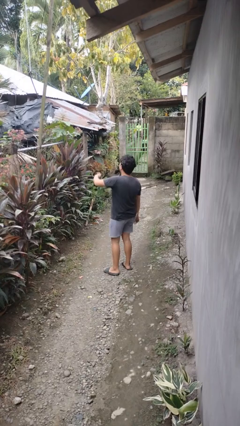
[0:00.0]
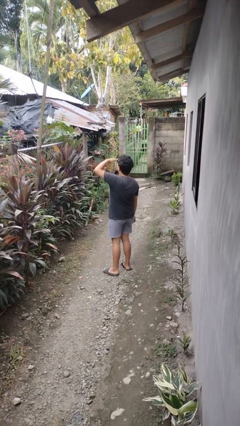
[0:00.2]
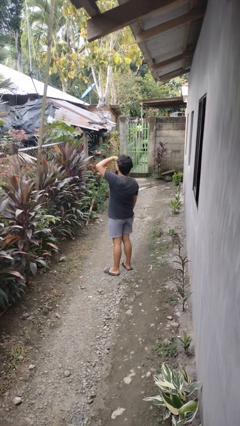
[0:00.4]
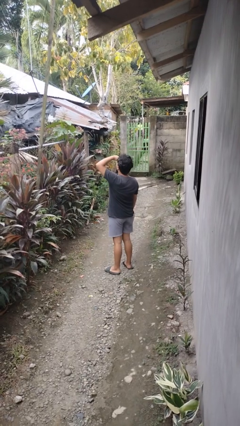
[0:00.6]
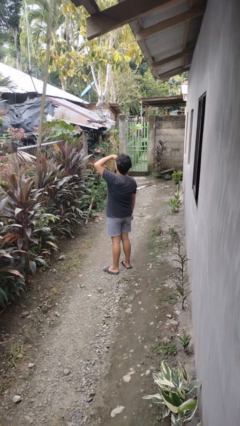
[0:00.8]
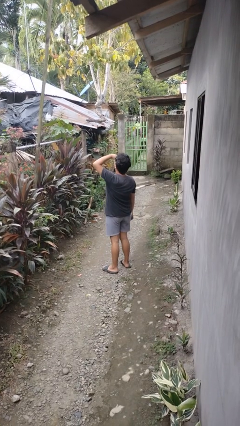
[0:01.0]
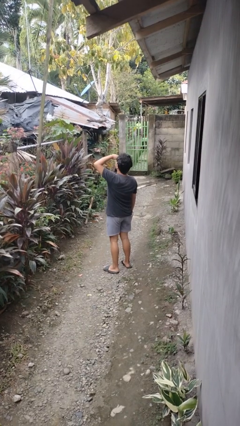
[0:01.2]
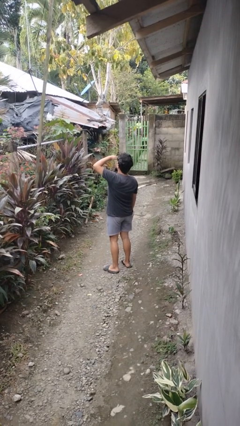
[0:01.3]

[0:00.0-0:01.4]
person shades eyes

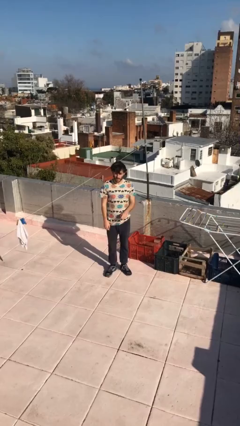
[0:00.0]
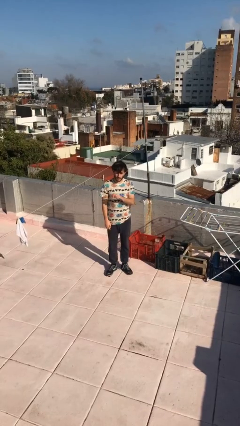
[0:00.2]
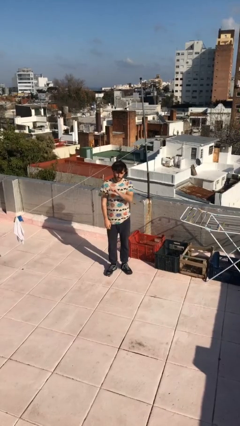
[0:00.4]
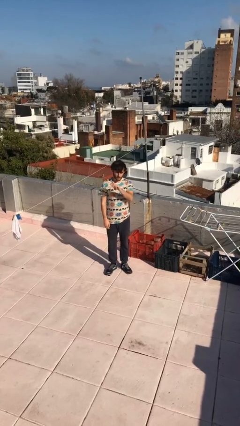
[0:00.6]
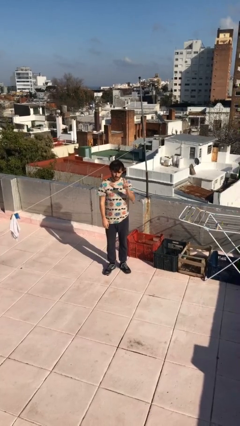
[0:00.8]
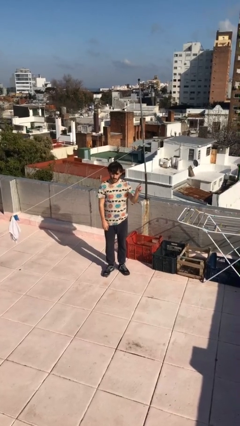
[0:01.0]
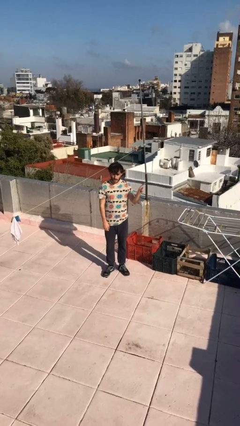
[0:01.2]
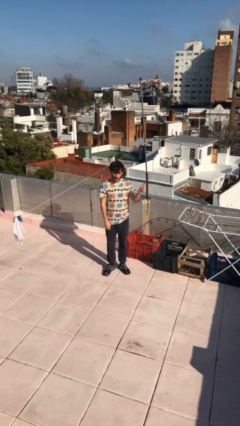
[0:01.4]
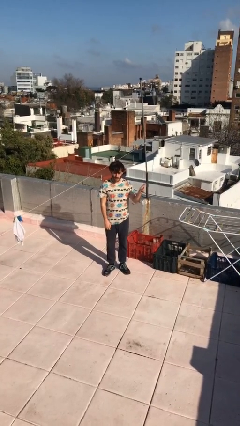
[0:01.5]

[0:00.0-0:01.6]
person gestures swipe left

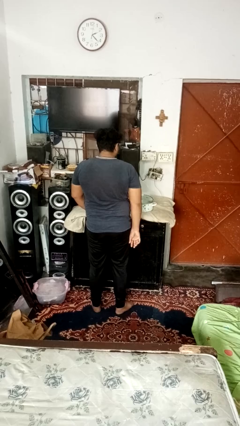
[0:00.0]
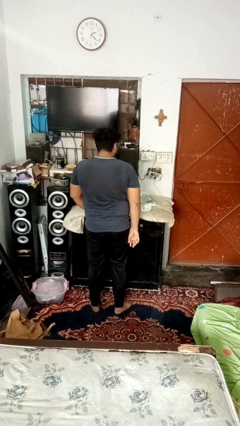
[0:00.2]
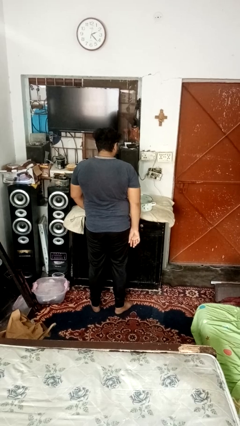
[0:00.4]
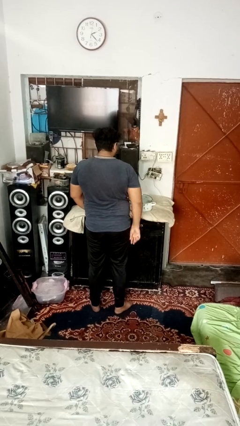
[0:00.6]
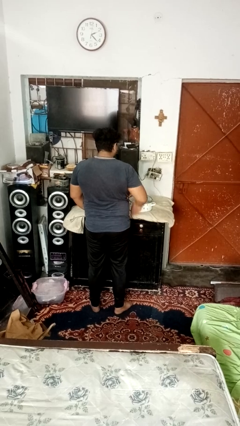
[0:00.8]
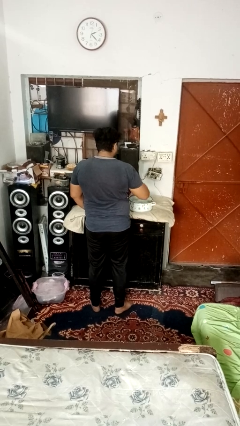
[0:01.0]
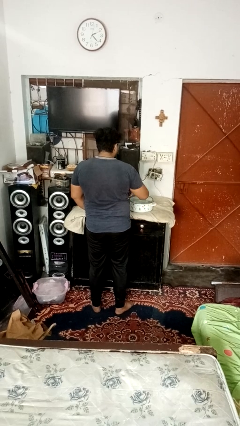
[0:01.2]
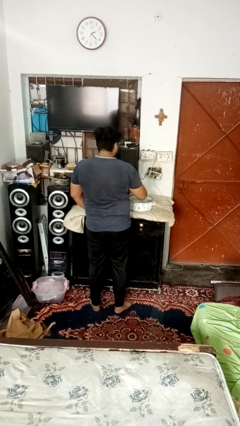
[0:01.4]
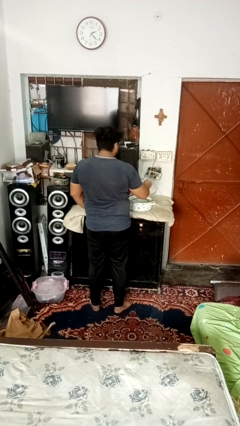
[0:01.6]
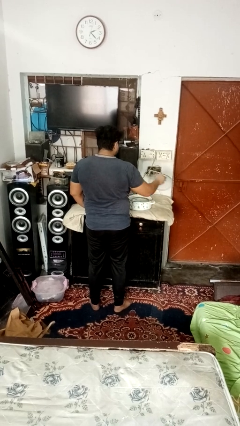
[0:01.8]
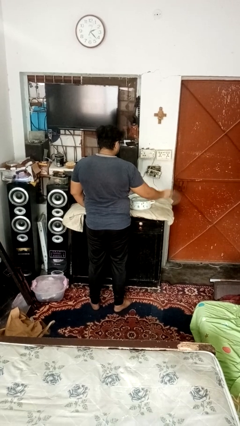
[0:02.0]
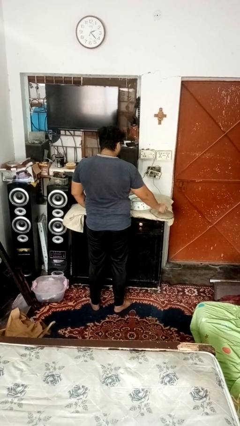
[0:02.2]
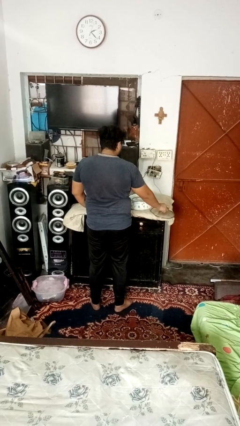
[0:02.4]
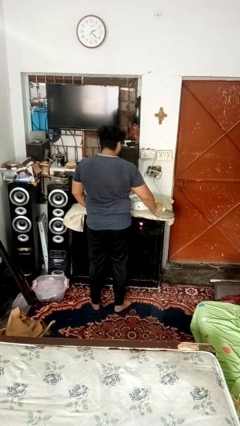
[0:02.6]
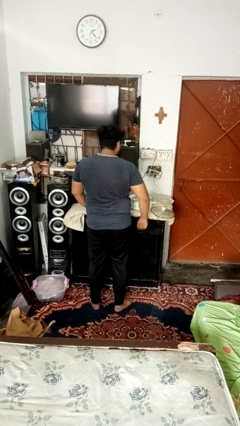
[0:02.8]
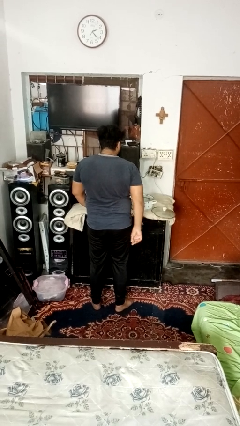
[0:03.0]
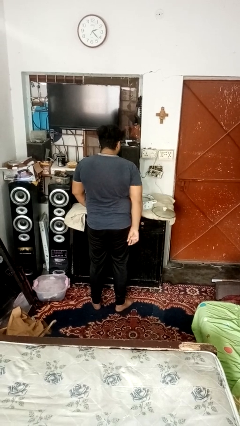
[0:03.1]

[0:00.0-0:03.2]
person opens jar

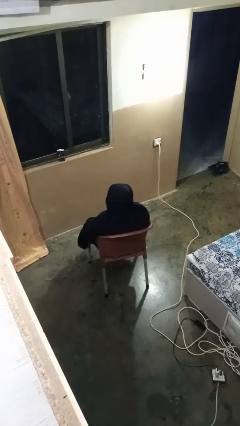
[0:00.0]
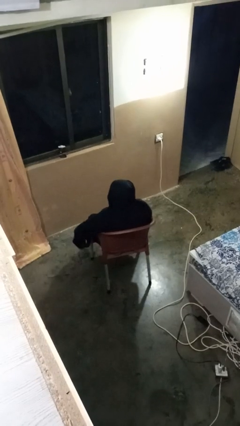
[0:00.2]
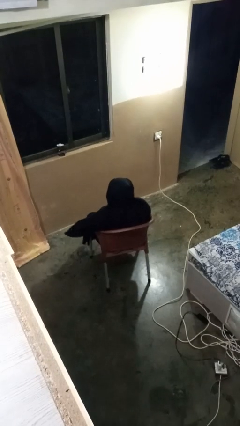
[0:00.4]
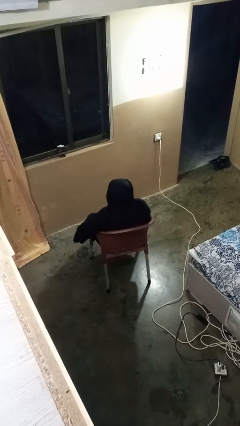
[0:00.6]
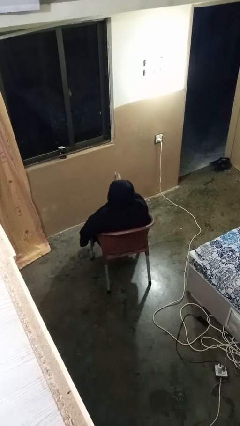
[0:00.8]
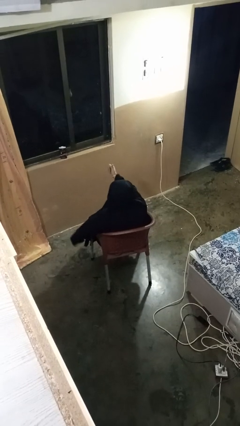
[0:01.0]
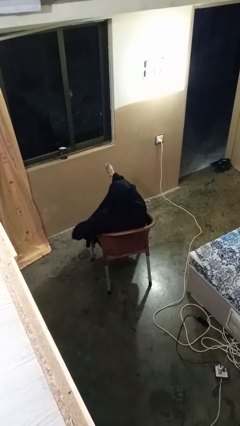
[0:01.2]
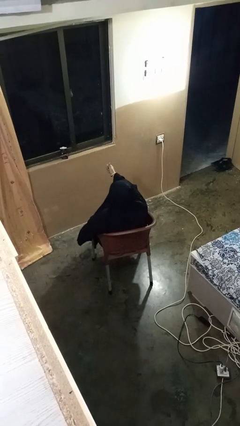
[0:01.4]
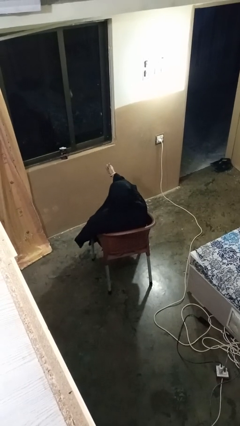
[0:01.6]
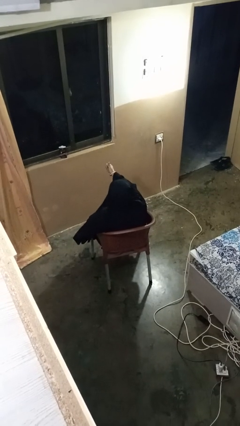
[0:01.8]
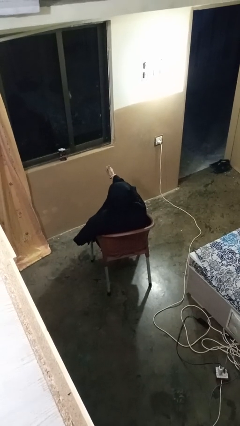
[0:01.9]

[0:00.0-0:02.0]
person gestures thumbs up

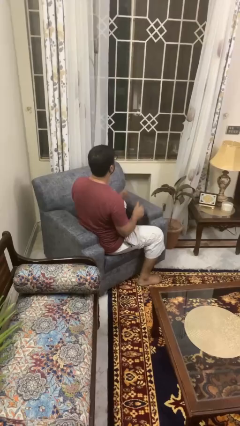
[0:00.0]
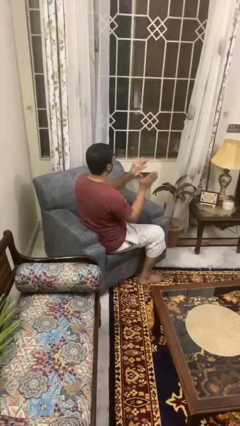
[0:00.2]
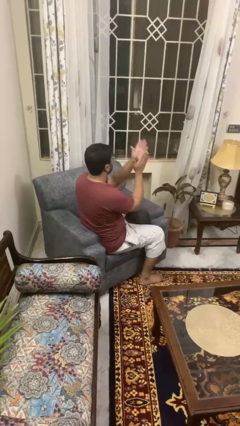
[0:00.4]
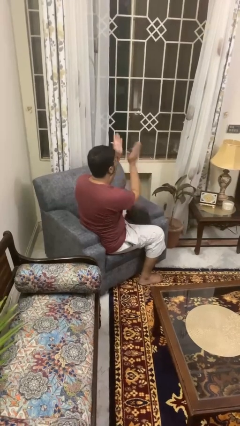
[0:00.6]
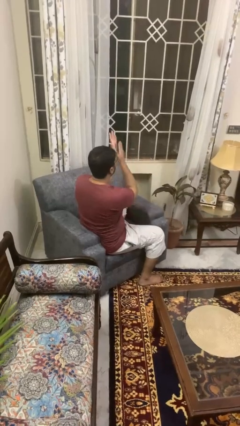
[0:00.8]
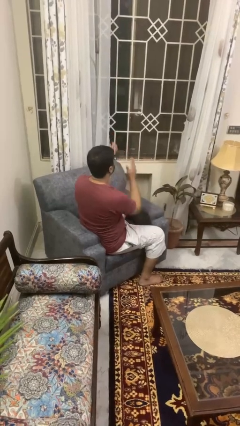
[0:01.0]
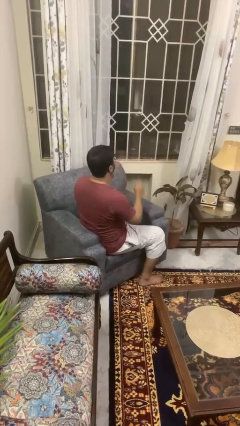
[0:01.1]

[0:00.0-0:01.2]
person swats bug

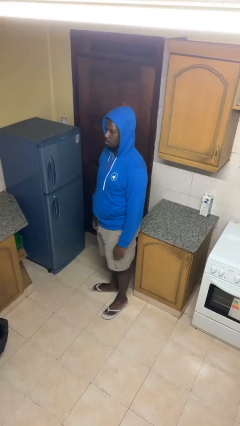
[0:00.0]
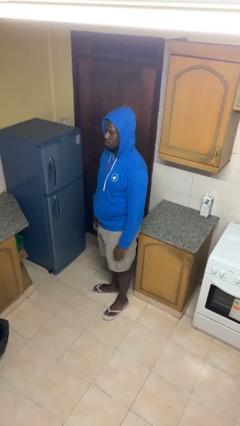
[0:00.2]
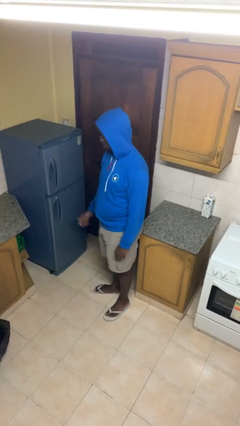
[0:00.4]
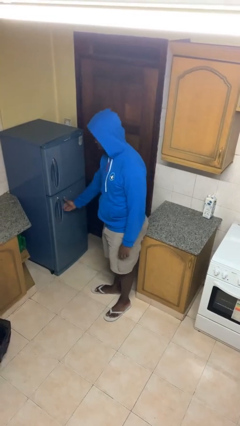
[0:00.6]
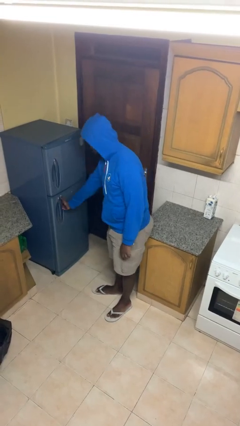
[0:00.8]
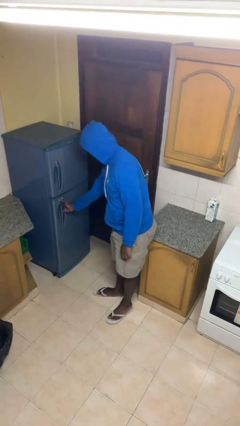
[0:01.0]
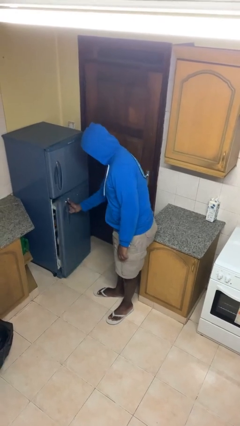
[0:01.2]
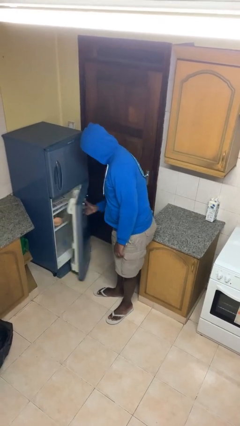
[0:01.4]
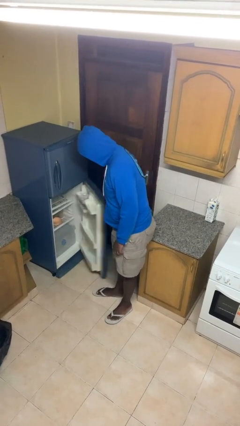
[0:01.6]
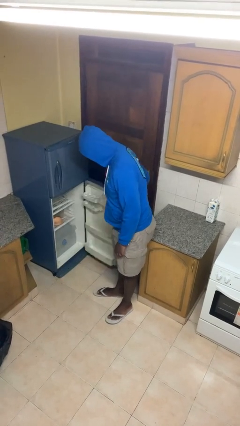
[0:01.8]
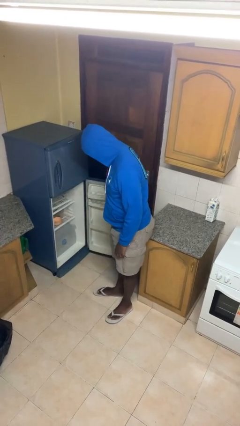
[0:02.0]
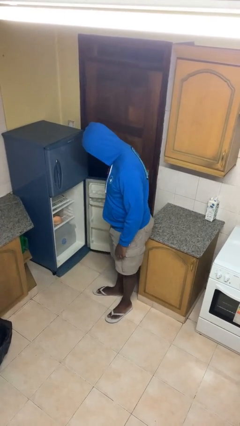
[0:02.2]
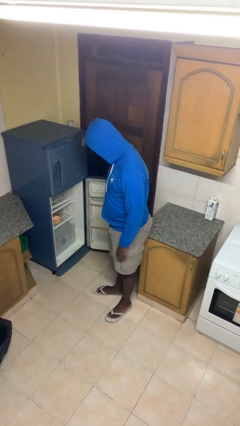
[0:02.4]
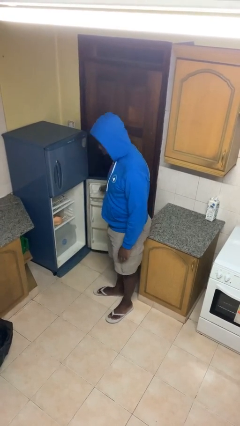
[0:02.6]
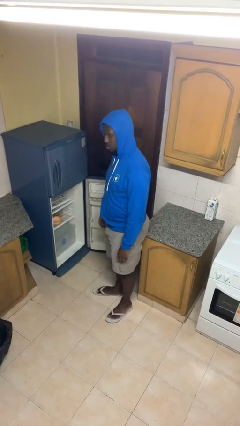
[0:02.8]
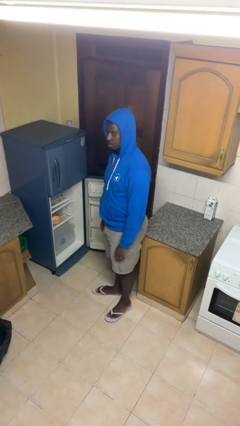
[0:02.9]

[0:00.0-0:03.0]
person opens refrigerator

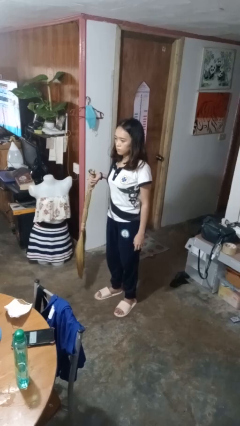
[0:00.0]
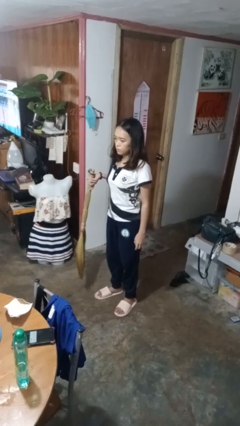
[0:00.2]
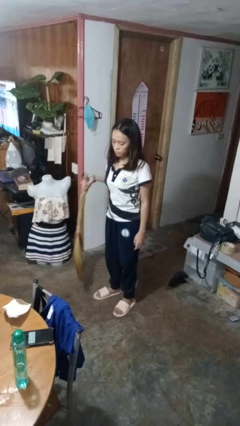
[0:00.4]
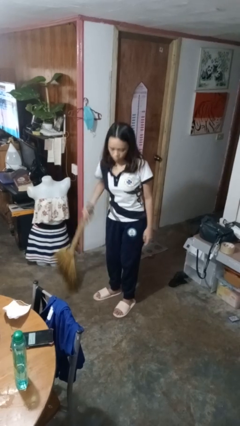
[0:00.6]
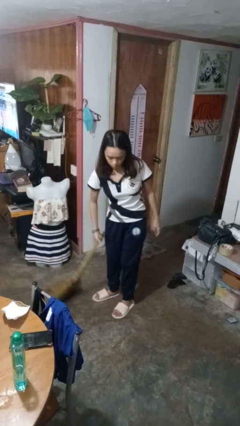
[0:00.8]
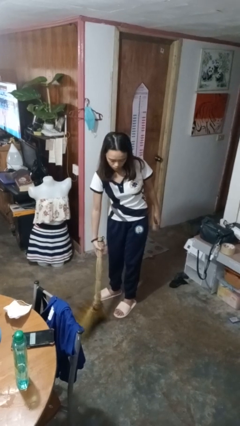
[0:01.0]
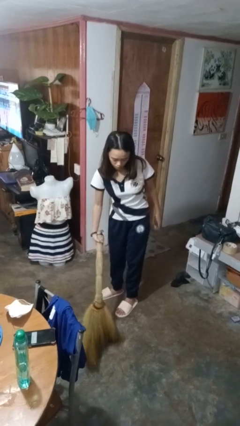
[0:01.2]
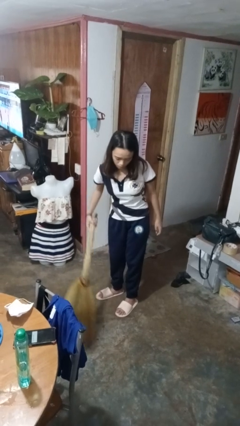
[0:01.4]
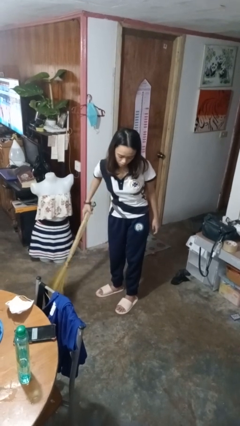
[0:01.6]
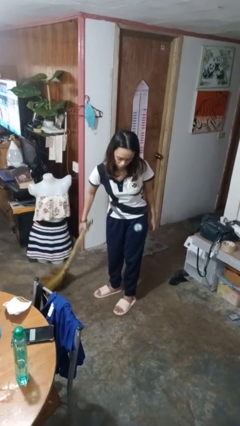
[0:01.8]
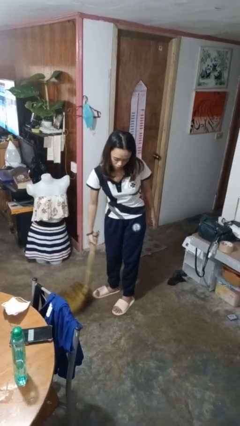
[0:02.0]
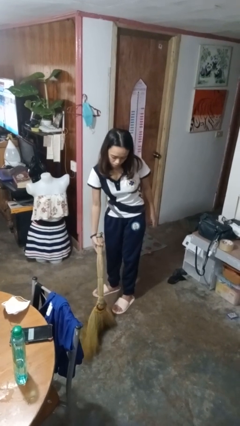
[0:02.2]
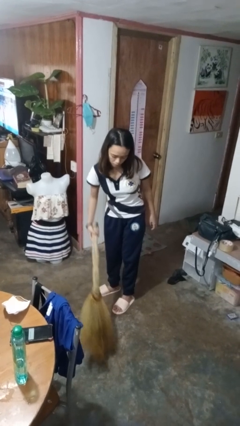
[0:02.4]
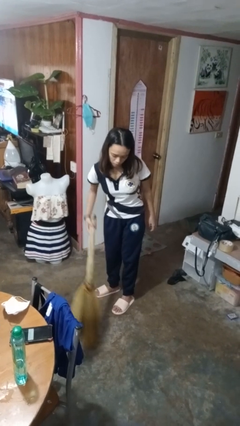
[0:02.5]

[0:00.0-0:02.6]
person sweeps floor

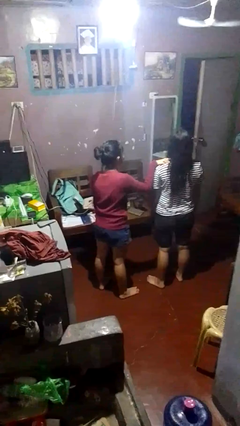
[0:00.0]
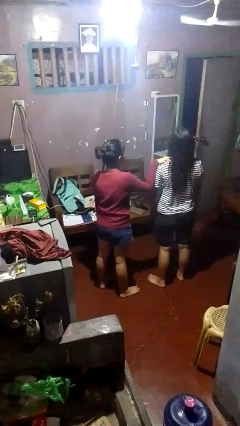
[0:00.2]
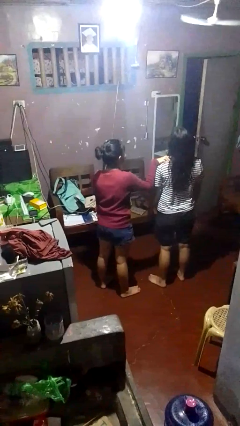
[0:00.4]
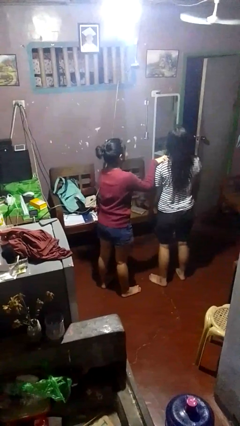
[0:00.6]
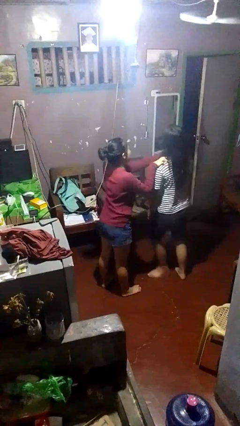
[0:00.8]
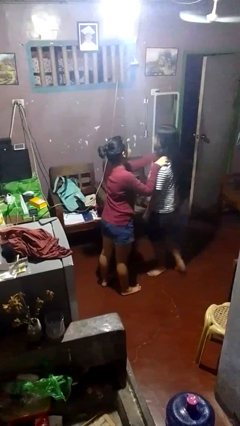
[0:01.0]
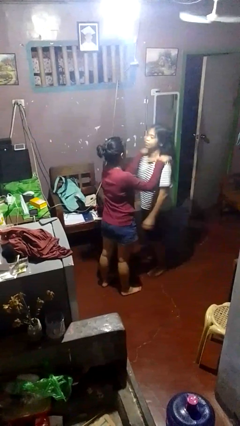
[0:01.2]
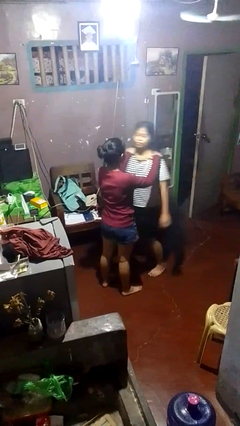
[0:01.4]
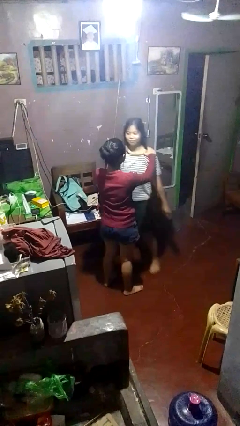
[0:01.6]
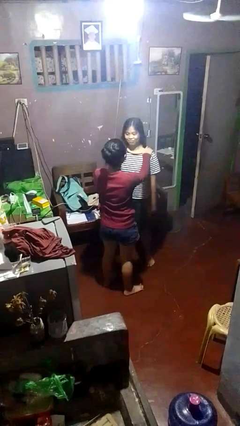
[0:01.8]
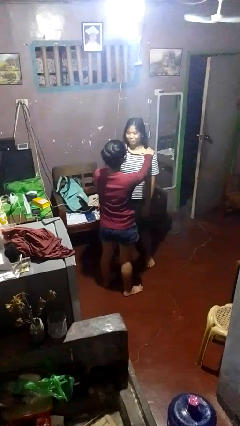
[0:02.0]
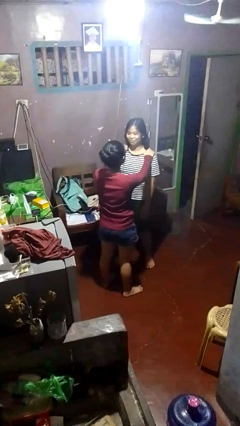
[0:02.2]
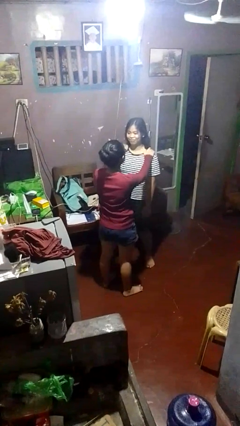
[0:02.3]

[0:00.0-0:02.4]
person spins person around
